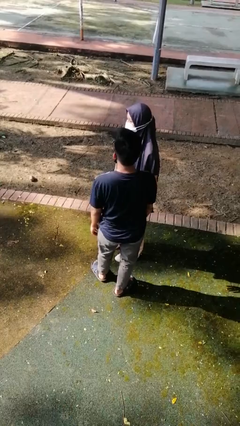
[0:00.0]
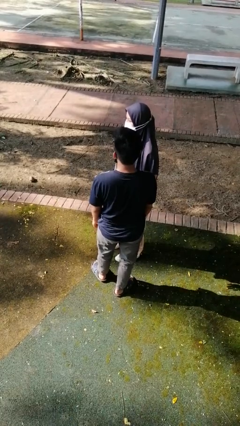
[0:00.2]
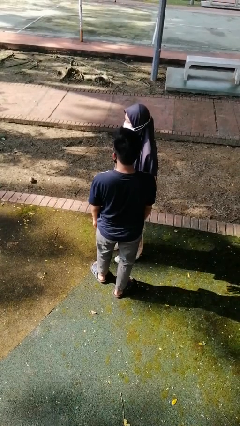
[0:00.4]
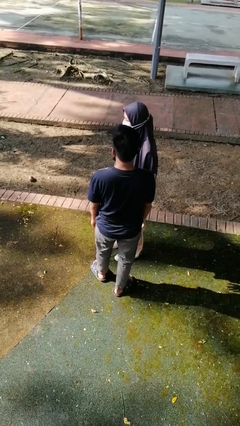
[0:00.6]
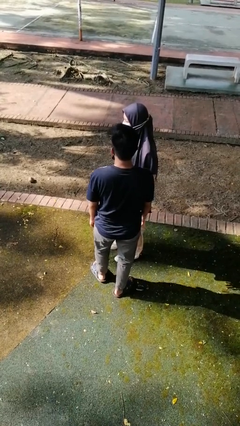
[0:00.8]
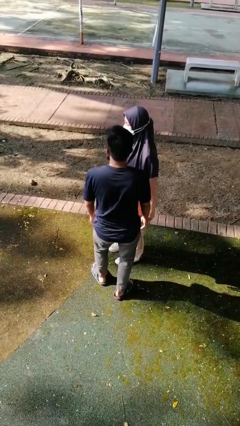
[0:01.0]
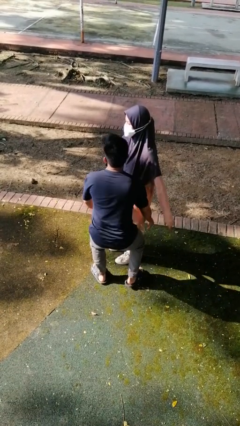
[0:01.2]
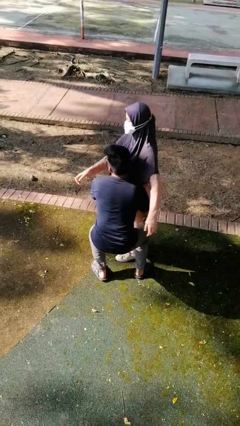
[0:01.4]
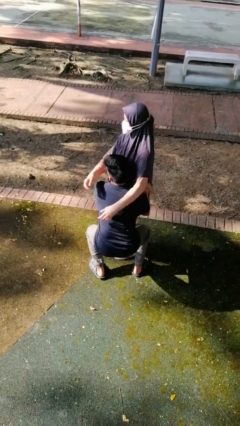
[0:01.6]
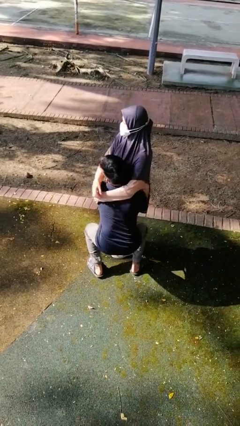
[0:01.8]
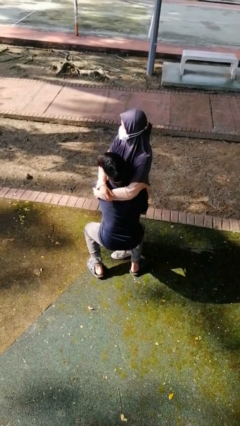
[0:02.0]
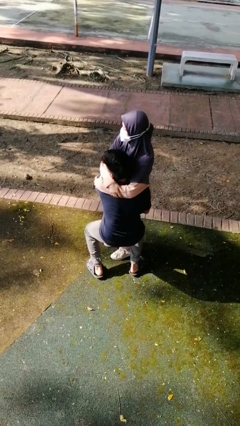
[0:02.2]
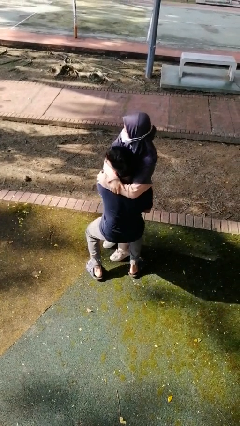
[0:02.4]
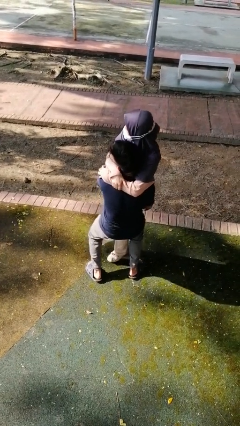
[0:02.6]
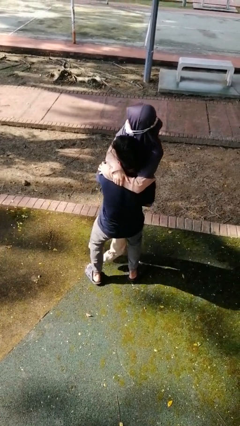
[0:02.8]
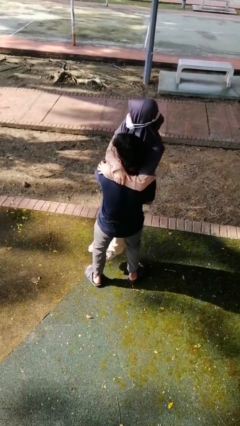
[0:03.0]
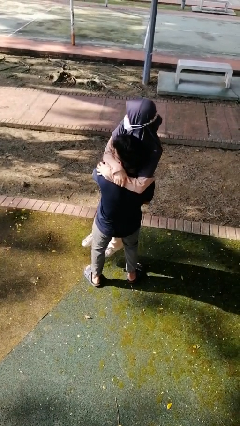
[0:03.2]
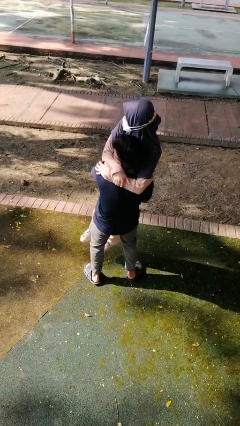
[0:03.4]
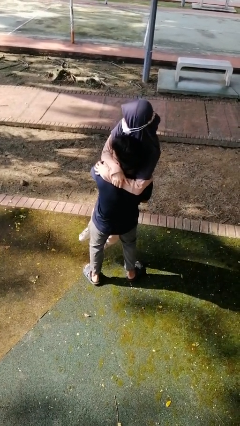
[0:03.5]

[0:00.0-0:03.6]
person picks up person

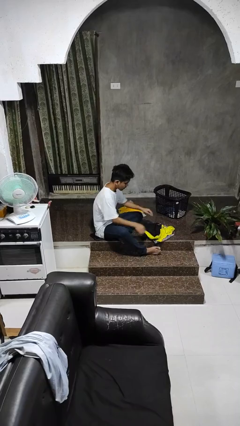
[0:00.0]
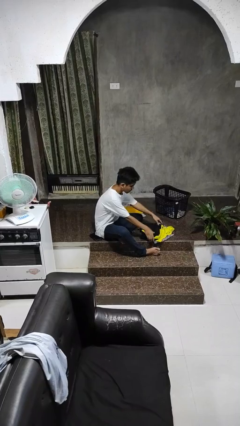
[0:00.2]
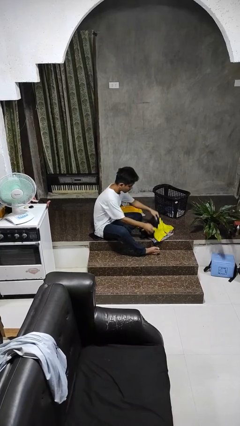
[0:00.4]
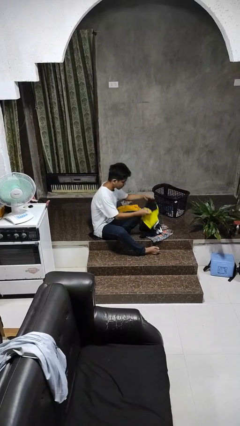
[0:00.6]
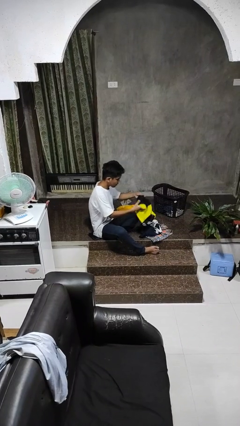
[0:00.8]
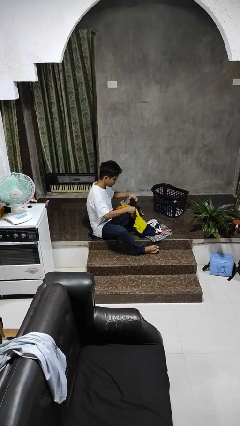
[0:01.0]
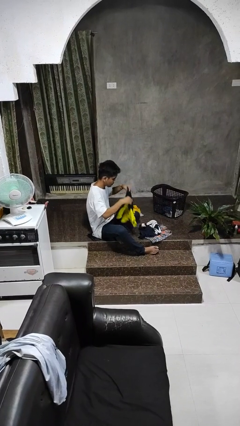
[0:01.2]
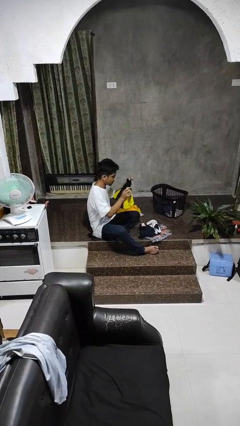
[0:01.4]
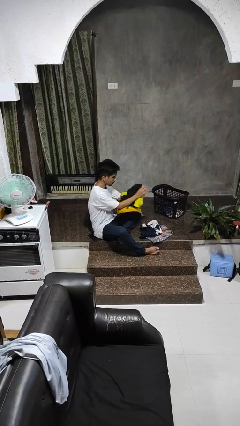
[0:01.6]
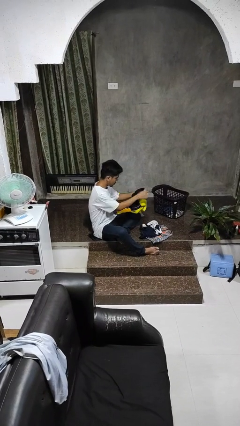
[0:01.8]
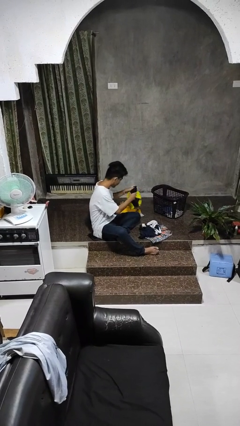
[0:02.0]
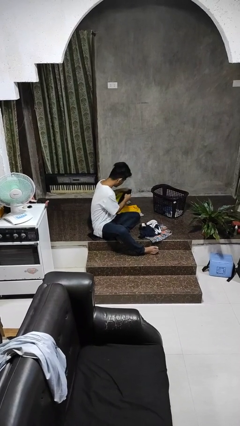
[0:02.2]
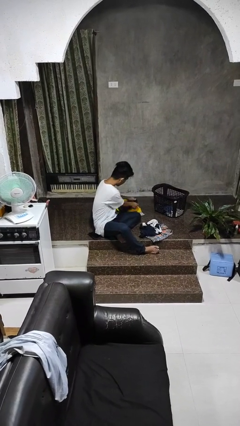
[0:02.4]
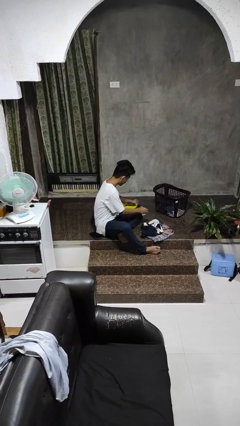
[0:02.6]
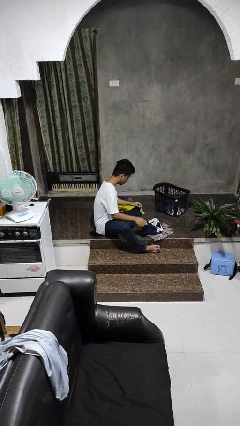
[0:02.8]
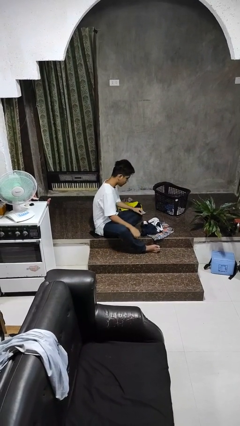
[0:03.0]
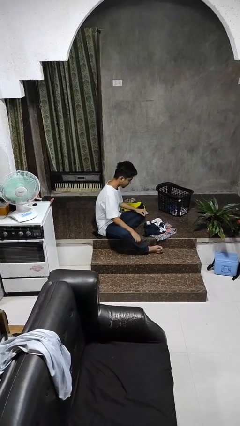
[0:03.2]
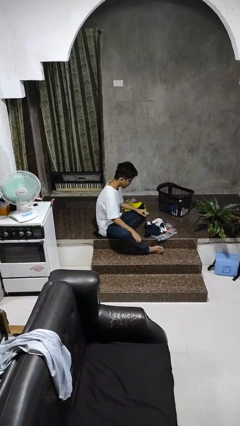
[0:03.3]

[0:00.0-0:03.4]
person folds shirt

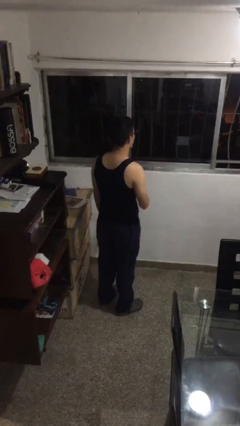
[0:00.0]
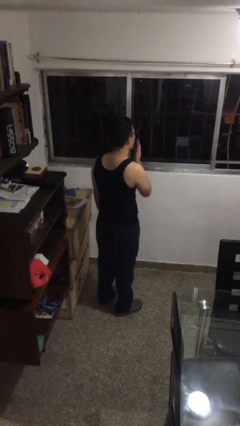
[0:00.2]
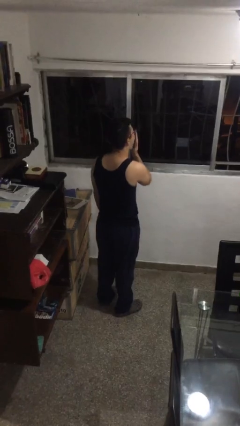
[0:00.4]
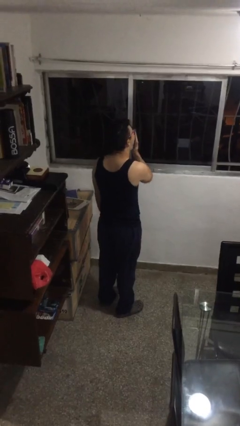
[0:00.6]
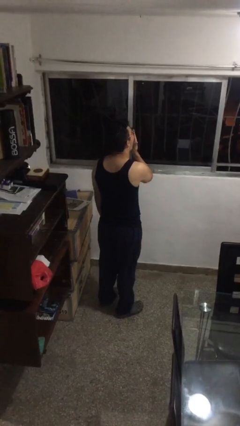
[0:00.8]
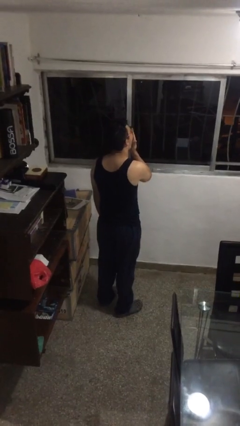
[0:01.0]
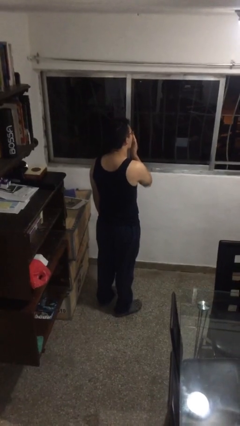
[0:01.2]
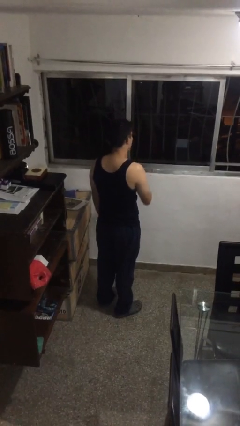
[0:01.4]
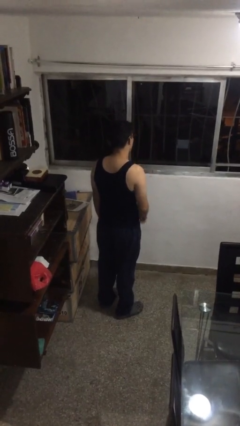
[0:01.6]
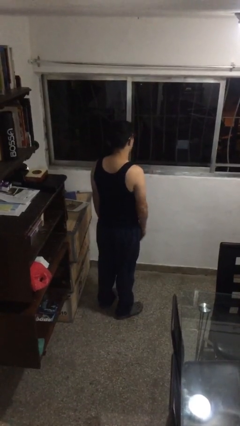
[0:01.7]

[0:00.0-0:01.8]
person yawns

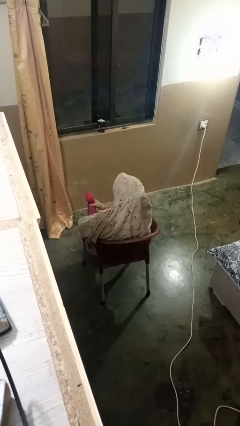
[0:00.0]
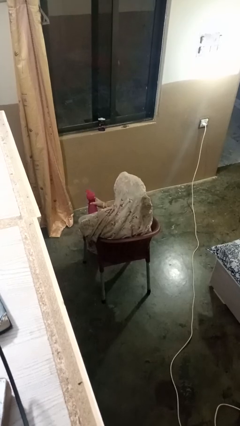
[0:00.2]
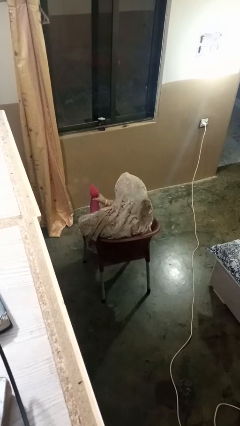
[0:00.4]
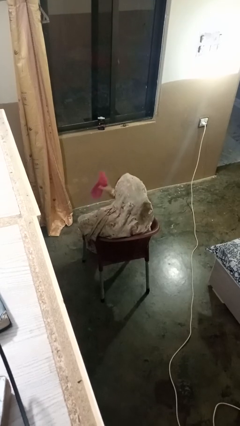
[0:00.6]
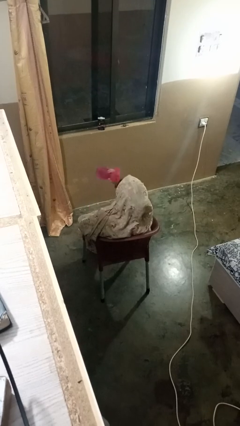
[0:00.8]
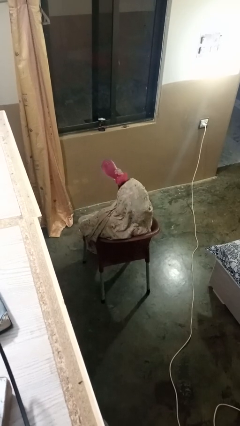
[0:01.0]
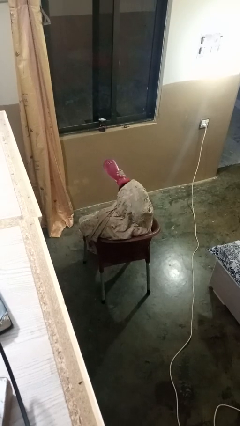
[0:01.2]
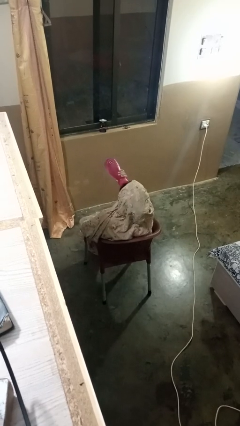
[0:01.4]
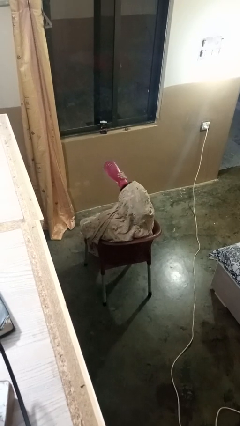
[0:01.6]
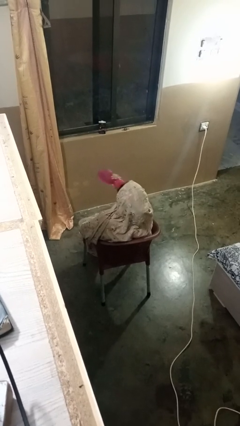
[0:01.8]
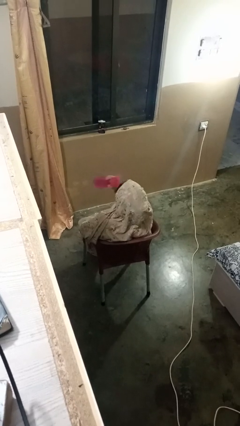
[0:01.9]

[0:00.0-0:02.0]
person drinks from bottle

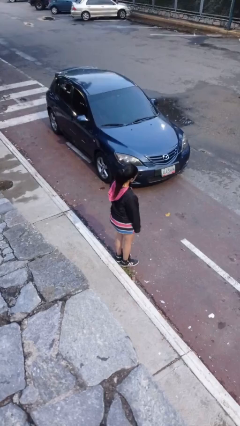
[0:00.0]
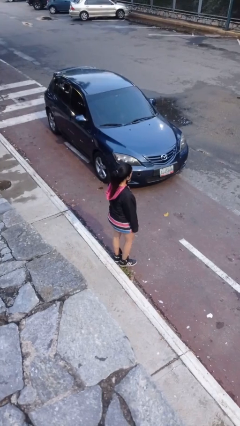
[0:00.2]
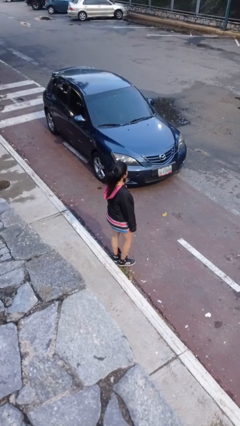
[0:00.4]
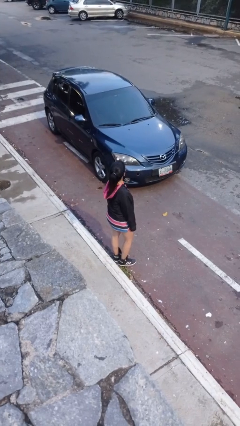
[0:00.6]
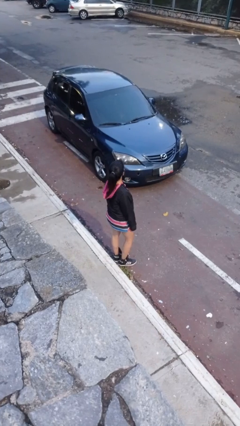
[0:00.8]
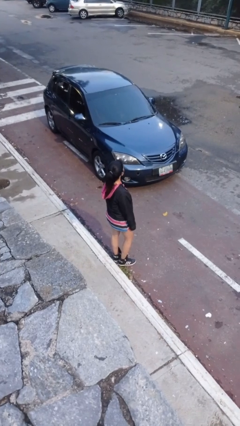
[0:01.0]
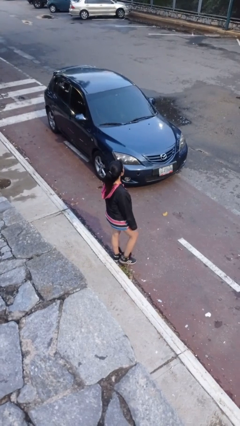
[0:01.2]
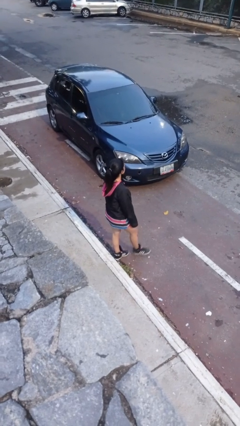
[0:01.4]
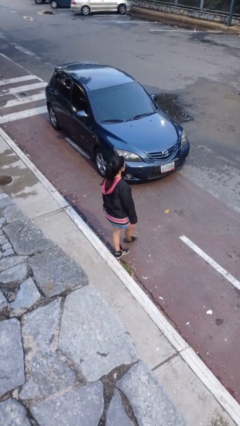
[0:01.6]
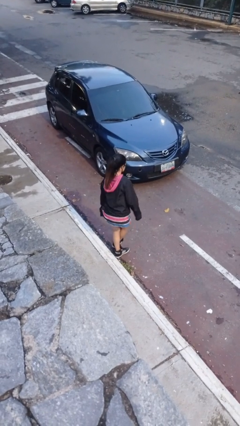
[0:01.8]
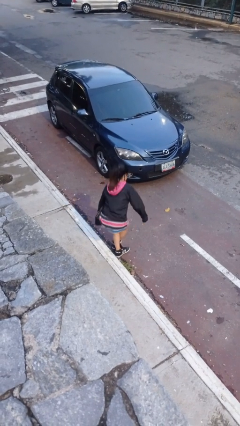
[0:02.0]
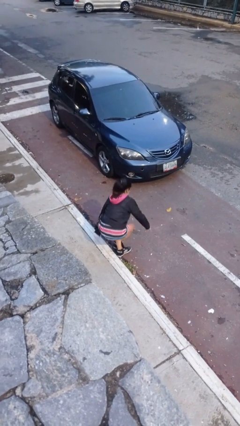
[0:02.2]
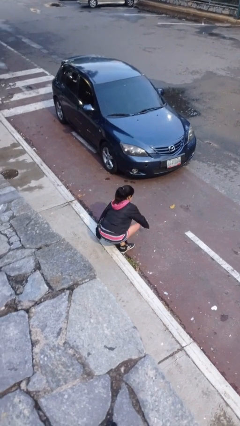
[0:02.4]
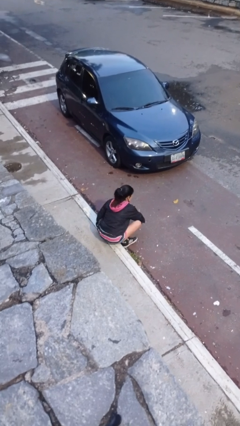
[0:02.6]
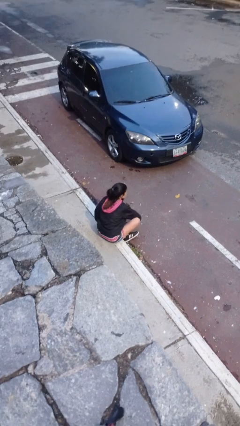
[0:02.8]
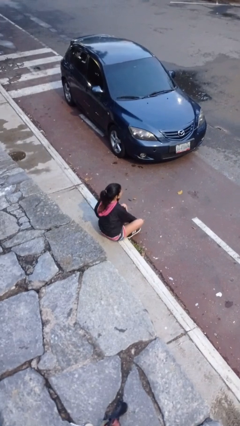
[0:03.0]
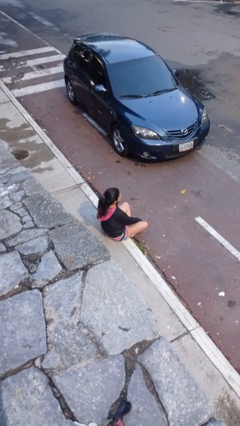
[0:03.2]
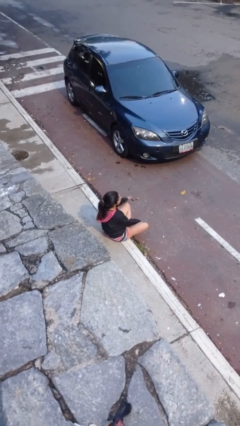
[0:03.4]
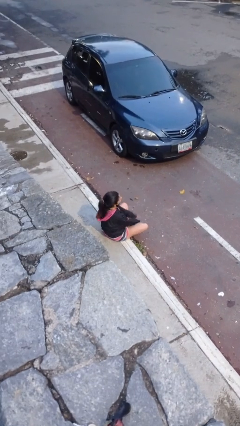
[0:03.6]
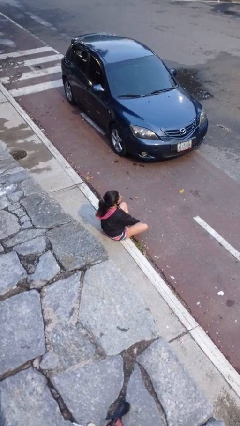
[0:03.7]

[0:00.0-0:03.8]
person sits crisscross

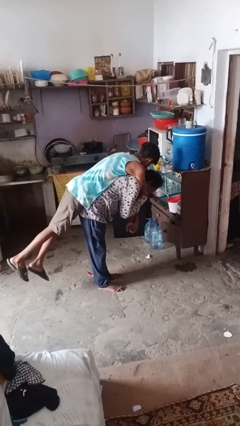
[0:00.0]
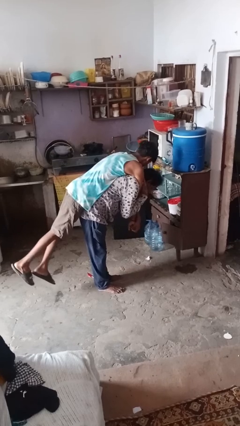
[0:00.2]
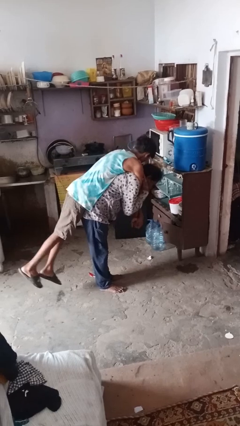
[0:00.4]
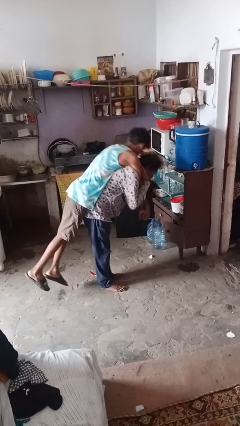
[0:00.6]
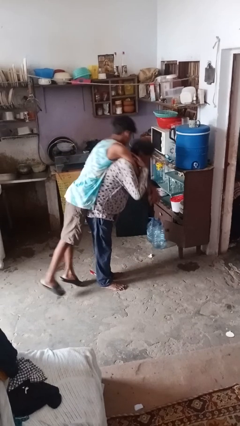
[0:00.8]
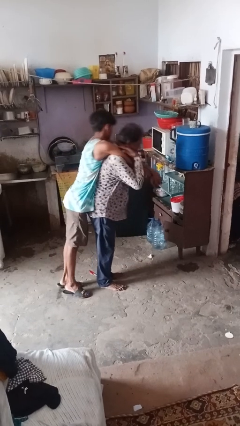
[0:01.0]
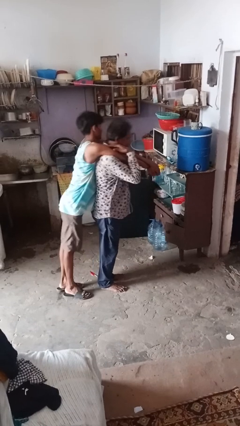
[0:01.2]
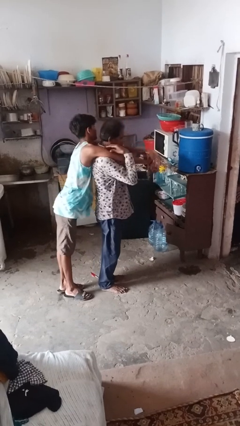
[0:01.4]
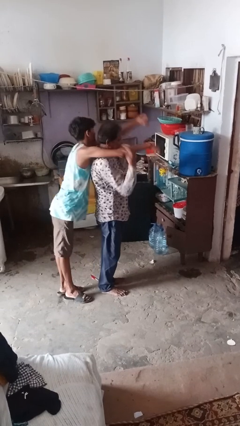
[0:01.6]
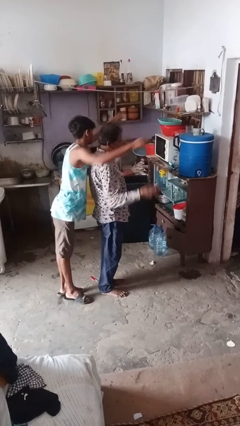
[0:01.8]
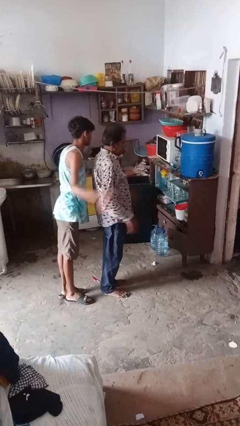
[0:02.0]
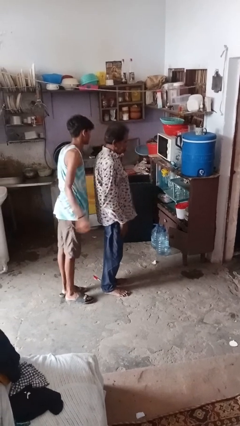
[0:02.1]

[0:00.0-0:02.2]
person puts down person

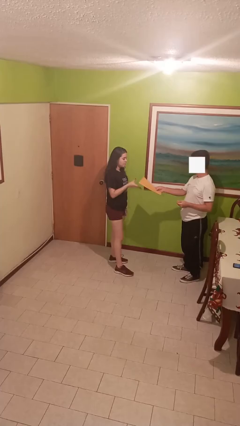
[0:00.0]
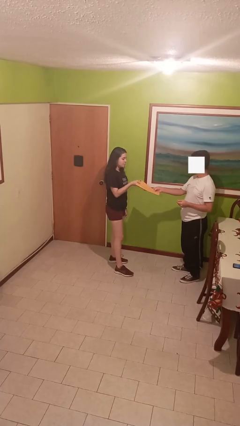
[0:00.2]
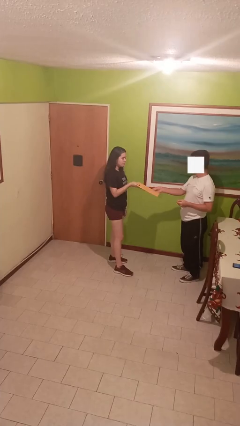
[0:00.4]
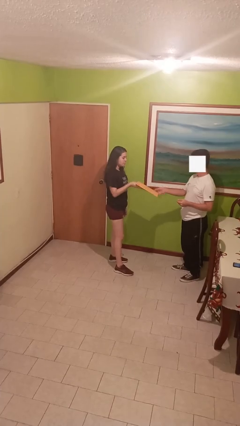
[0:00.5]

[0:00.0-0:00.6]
person transfers object to person
